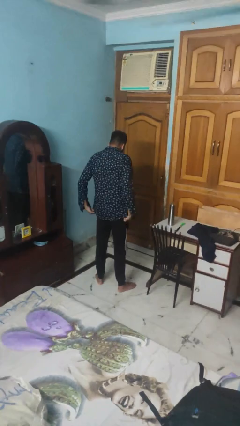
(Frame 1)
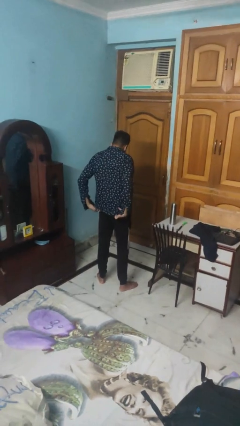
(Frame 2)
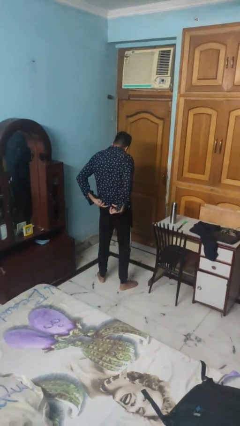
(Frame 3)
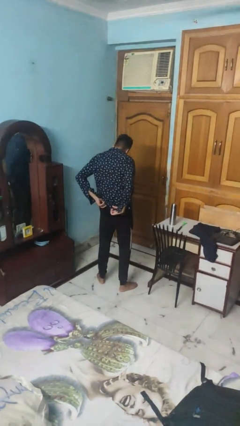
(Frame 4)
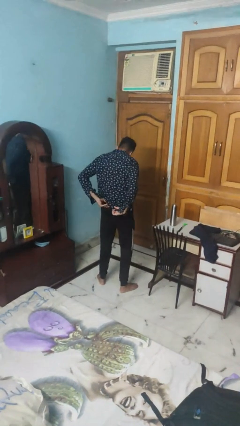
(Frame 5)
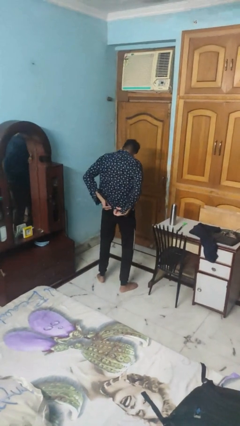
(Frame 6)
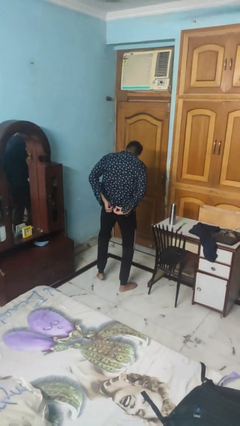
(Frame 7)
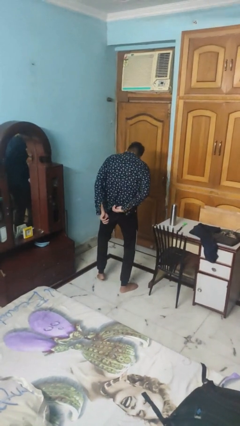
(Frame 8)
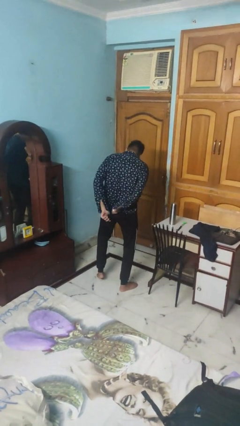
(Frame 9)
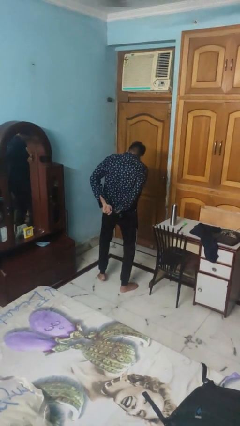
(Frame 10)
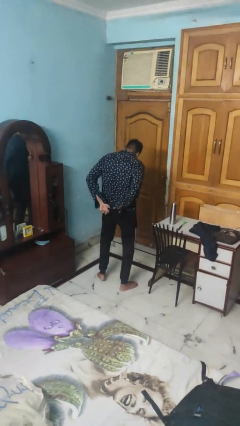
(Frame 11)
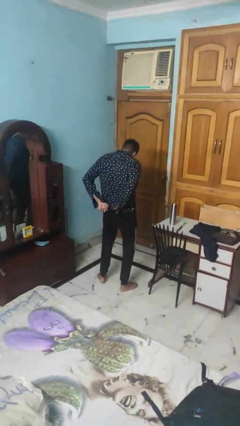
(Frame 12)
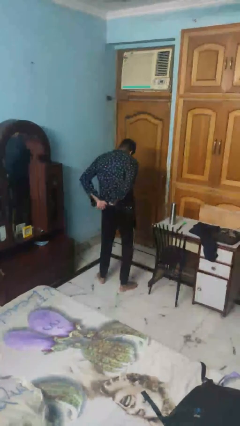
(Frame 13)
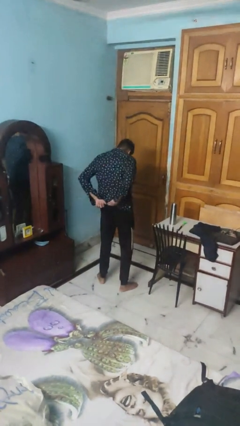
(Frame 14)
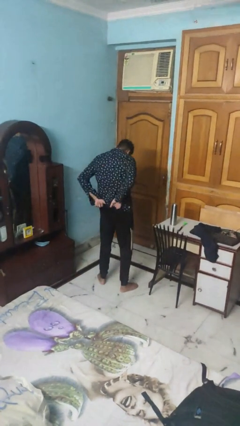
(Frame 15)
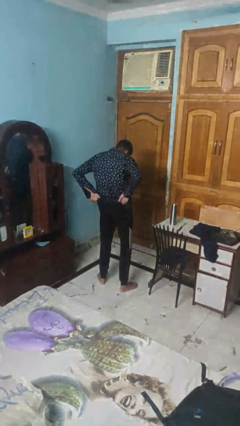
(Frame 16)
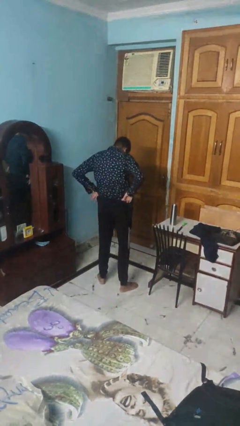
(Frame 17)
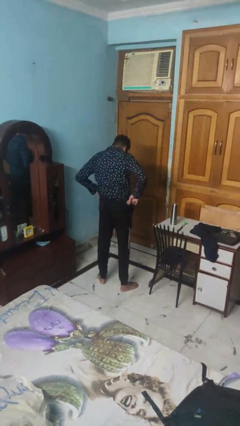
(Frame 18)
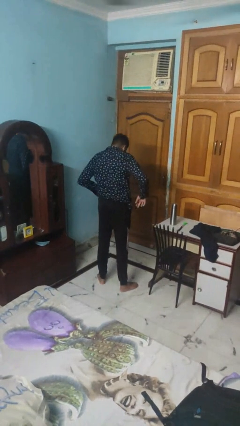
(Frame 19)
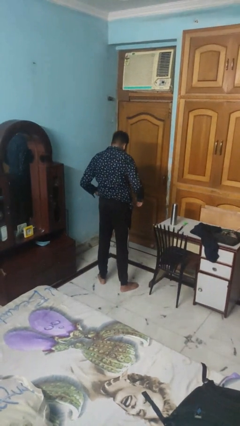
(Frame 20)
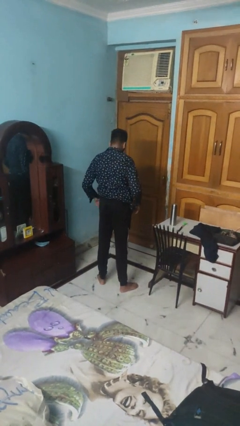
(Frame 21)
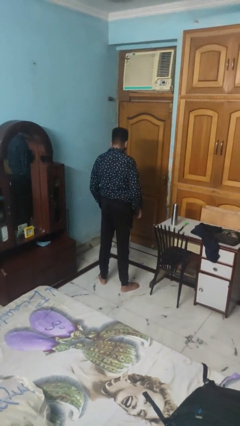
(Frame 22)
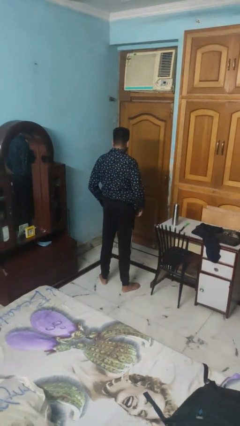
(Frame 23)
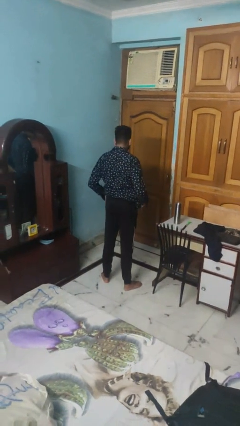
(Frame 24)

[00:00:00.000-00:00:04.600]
person tucks in shirt

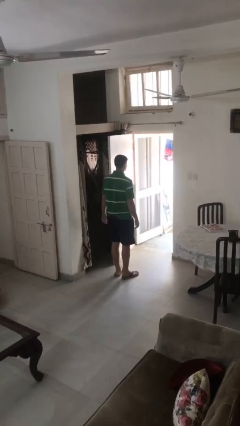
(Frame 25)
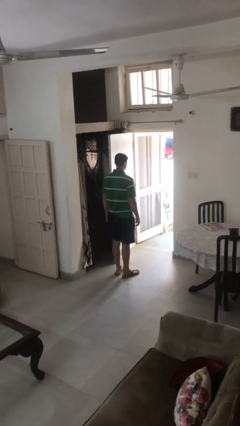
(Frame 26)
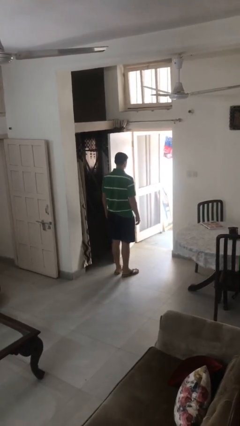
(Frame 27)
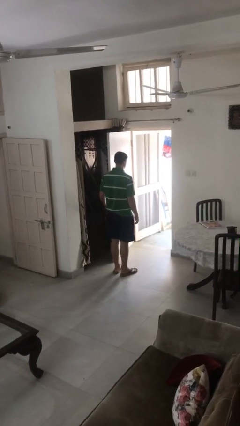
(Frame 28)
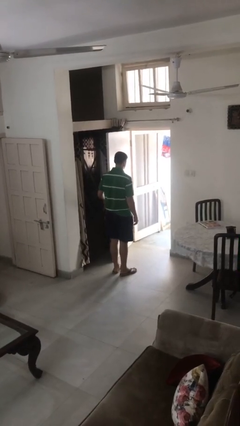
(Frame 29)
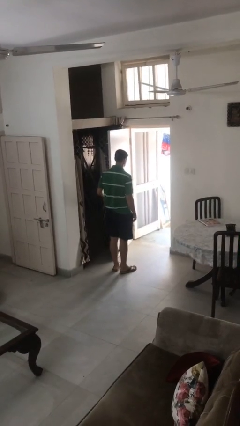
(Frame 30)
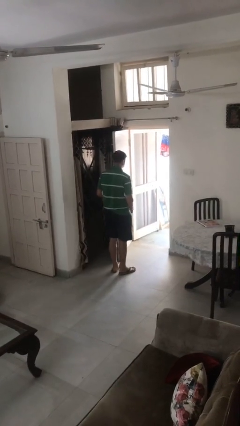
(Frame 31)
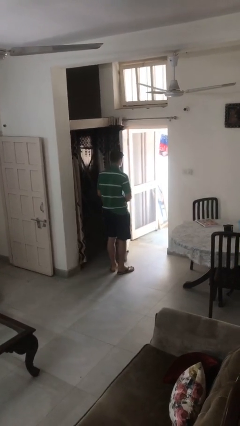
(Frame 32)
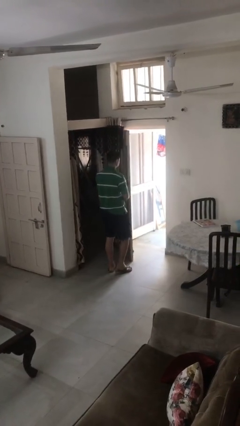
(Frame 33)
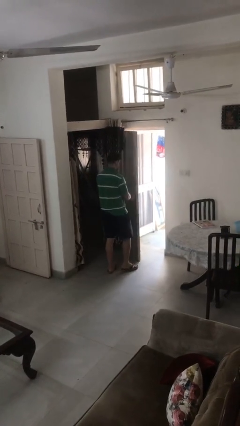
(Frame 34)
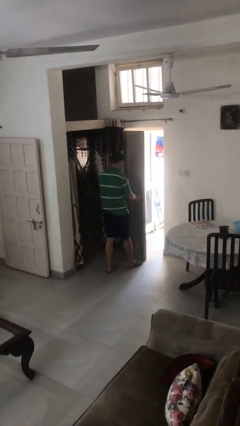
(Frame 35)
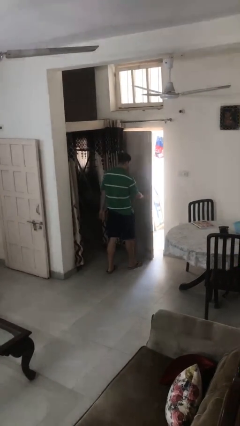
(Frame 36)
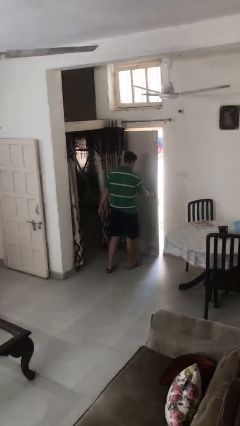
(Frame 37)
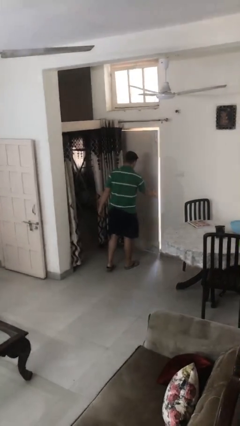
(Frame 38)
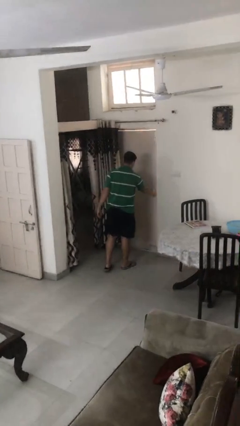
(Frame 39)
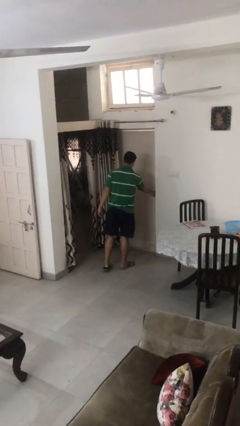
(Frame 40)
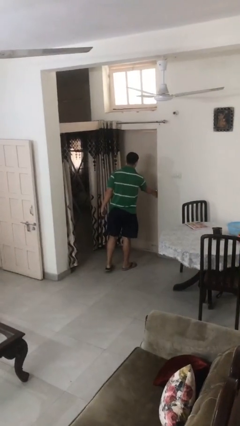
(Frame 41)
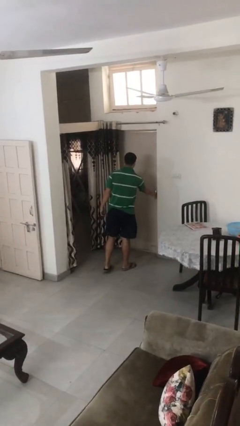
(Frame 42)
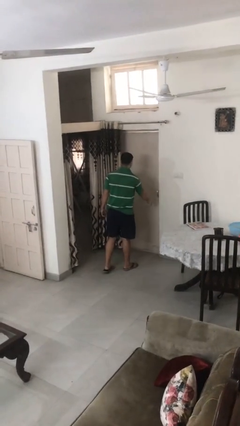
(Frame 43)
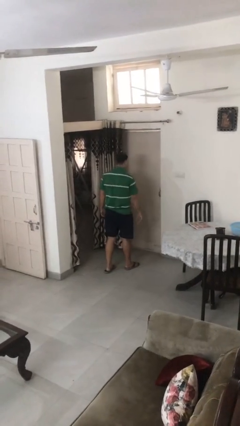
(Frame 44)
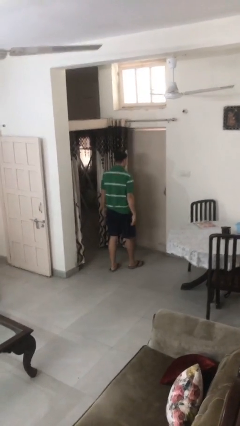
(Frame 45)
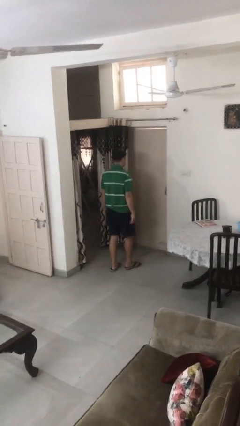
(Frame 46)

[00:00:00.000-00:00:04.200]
person closes facility door

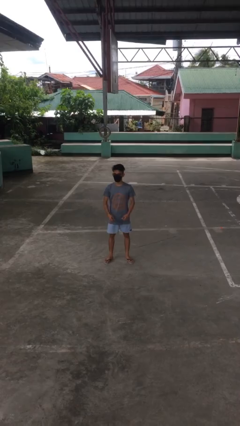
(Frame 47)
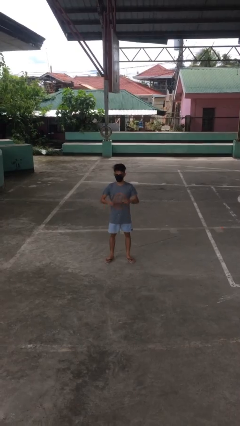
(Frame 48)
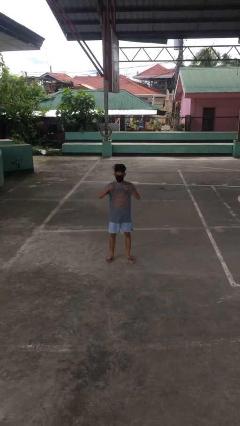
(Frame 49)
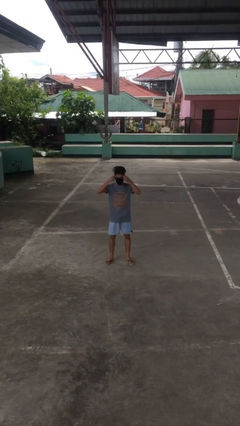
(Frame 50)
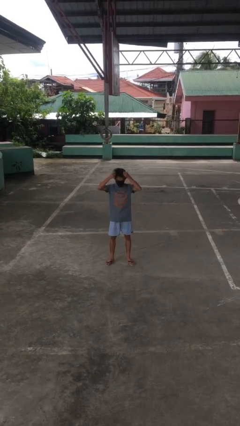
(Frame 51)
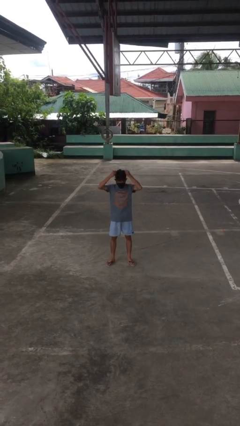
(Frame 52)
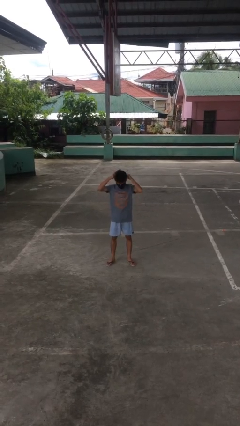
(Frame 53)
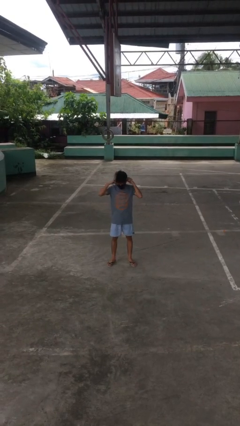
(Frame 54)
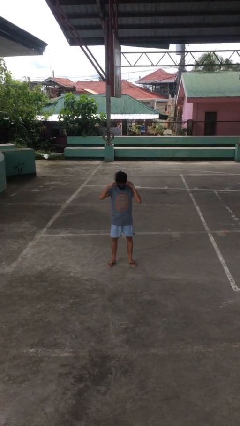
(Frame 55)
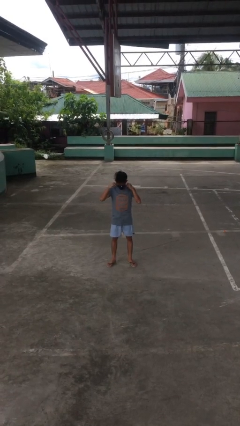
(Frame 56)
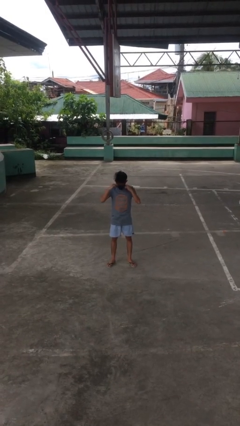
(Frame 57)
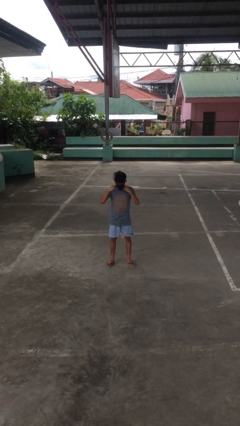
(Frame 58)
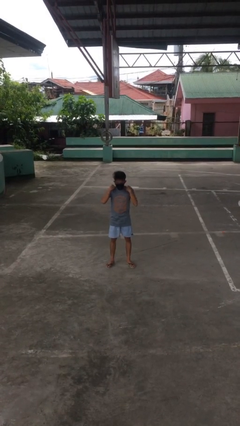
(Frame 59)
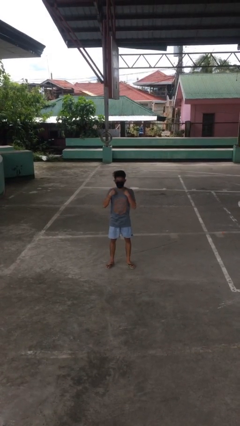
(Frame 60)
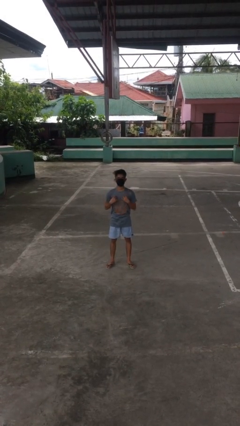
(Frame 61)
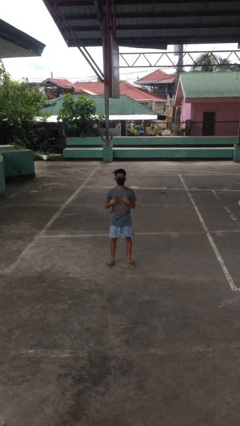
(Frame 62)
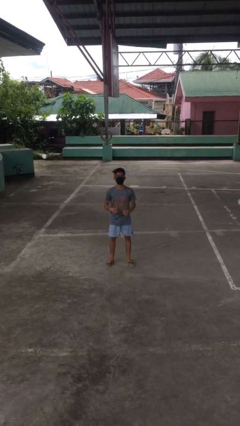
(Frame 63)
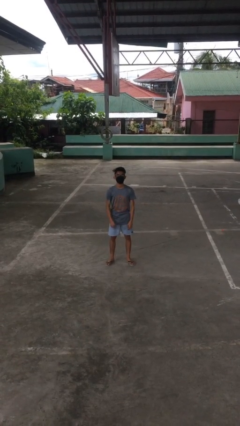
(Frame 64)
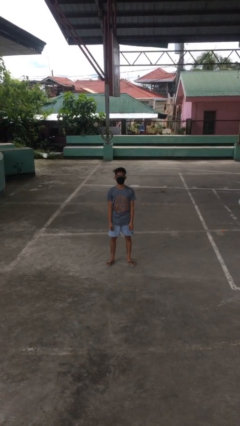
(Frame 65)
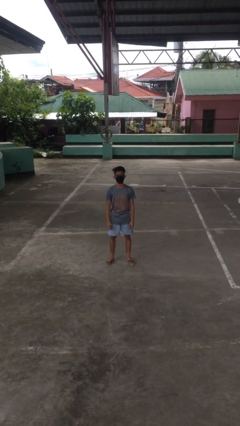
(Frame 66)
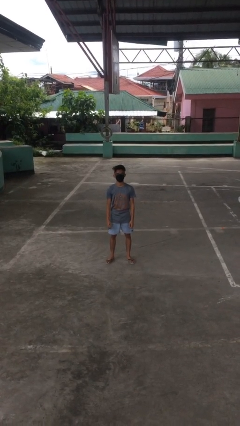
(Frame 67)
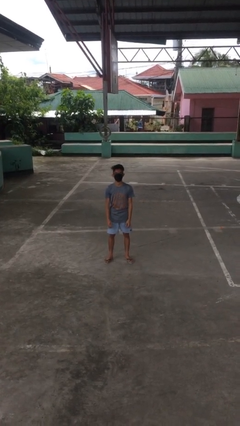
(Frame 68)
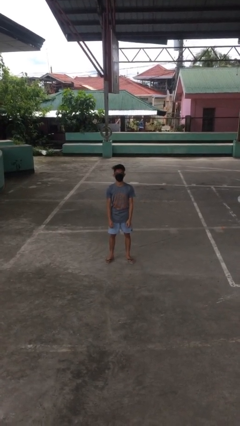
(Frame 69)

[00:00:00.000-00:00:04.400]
person puts on necklace

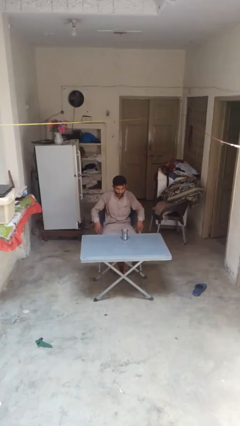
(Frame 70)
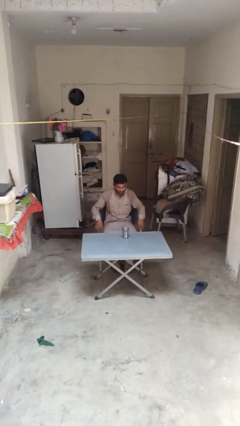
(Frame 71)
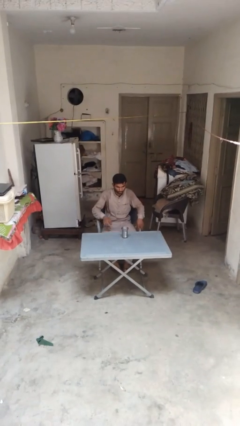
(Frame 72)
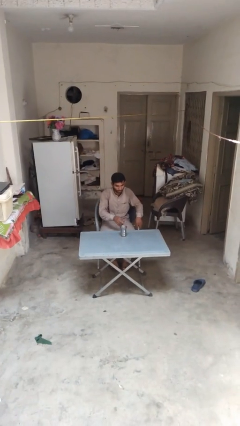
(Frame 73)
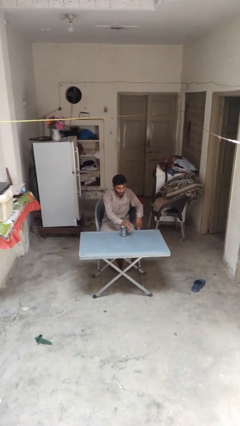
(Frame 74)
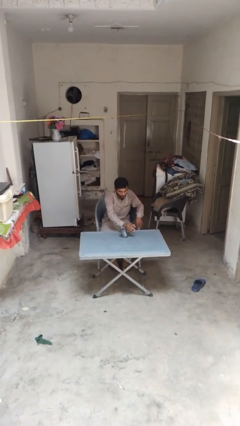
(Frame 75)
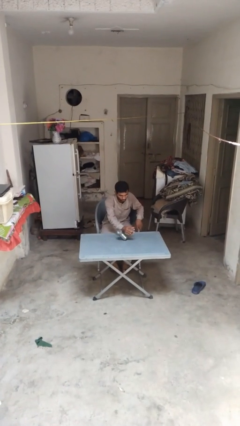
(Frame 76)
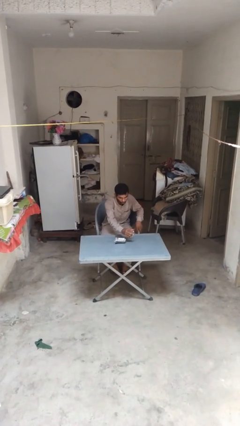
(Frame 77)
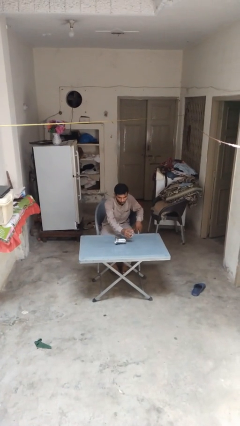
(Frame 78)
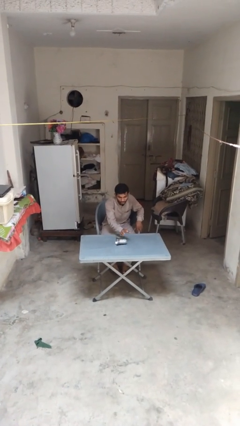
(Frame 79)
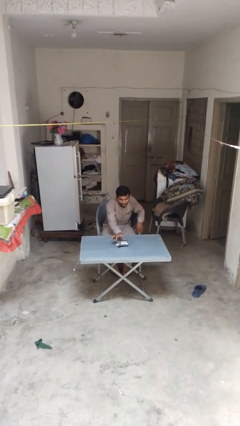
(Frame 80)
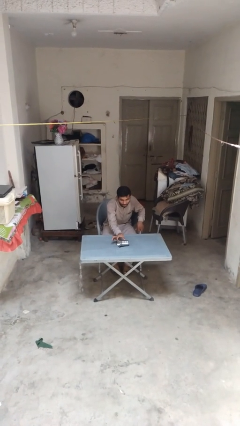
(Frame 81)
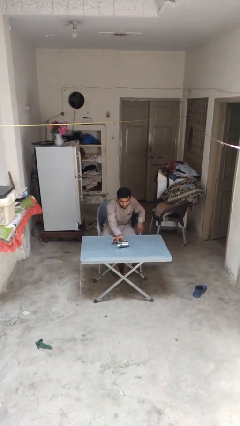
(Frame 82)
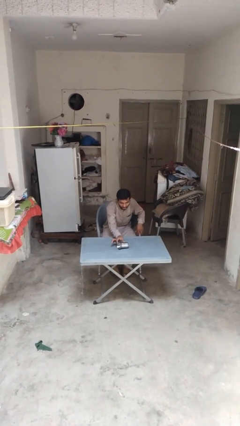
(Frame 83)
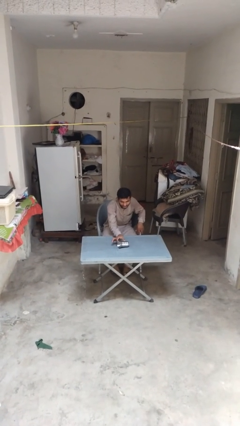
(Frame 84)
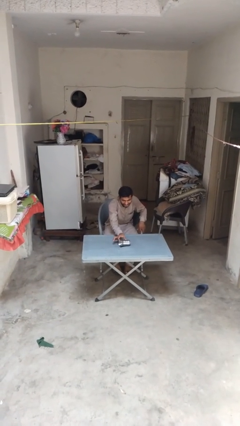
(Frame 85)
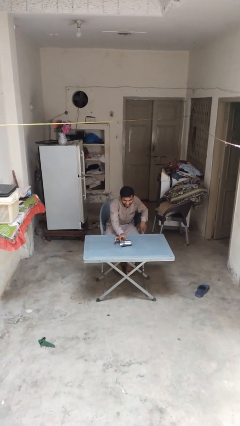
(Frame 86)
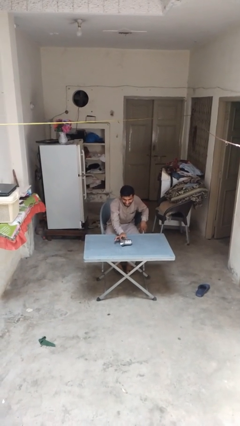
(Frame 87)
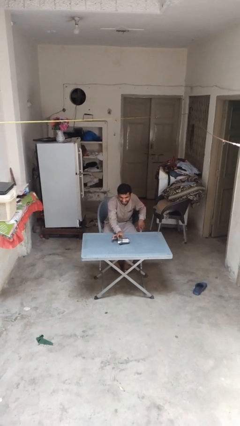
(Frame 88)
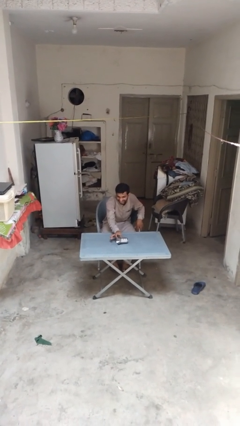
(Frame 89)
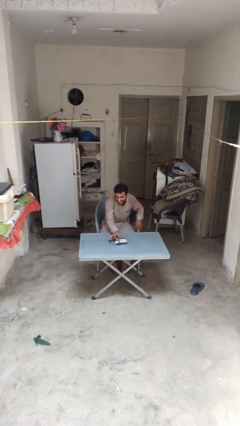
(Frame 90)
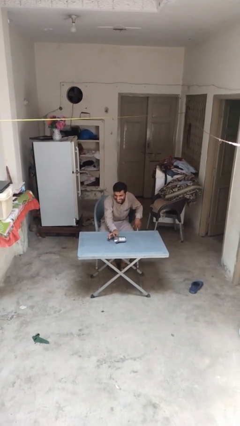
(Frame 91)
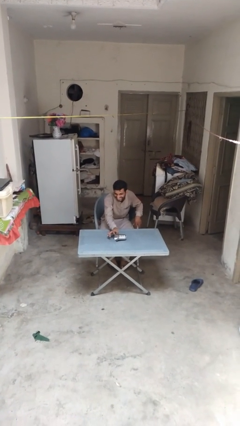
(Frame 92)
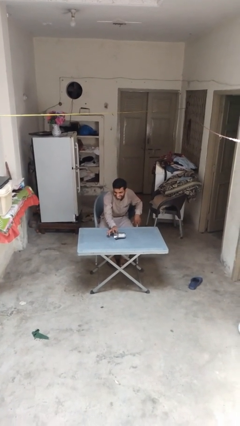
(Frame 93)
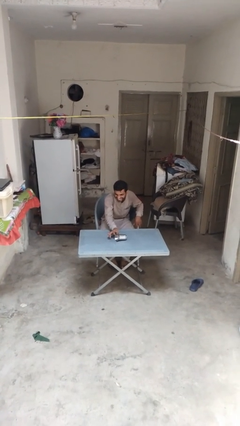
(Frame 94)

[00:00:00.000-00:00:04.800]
person spills on table
